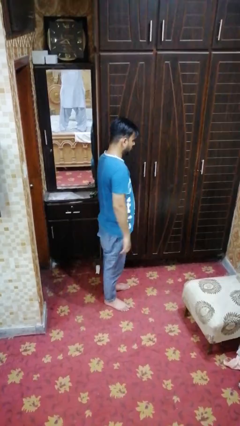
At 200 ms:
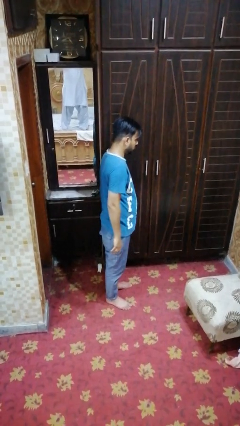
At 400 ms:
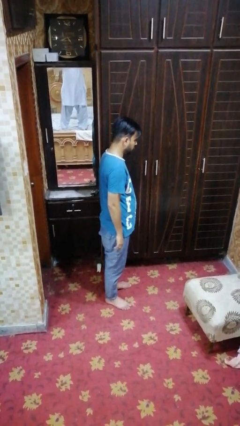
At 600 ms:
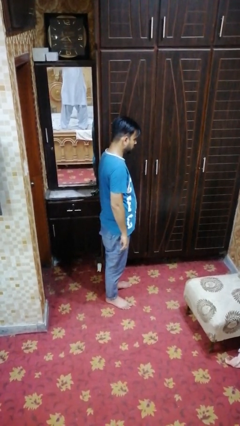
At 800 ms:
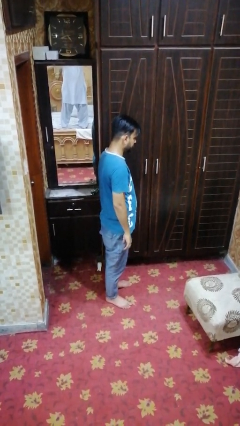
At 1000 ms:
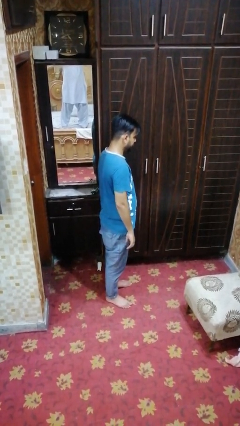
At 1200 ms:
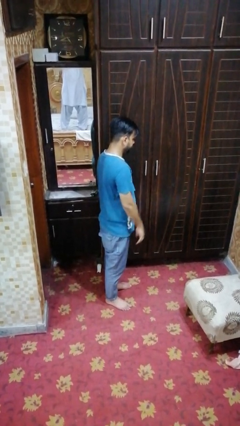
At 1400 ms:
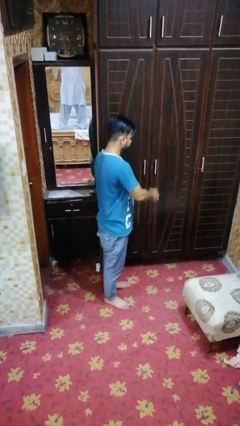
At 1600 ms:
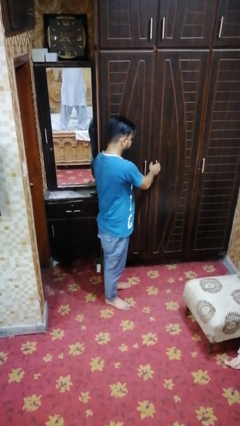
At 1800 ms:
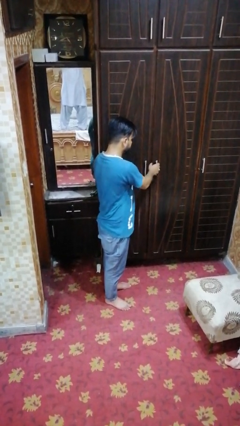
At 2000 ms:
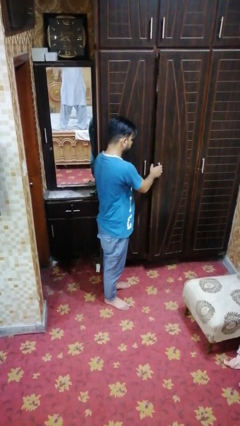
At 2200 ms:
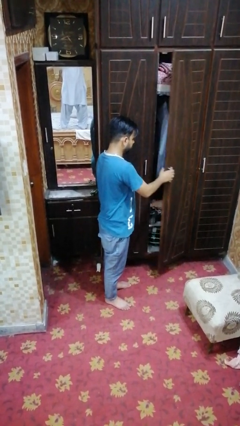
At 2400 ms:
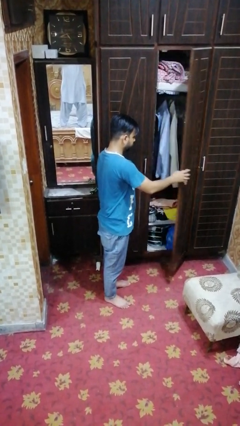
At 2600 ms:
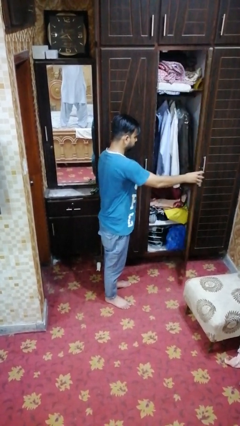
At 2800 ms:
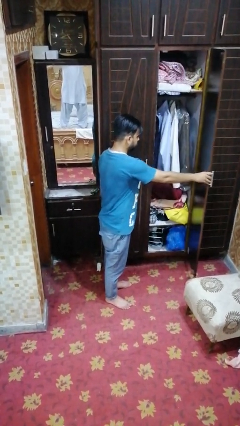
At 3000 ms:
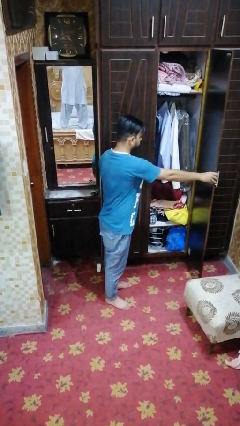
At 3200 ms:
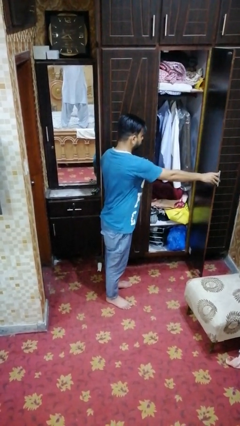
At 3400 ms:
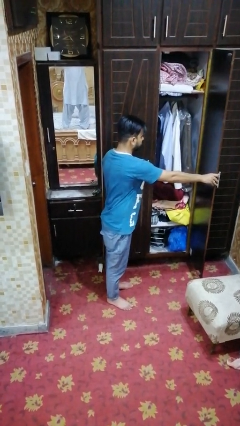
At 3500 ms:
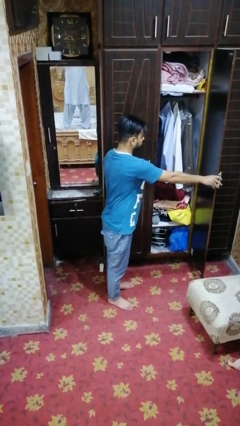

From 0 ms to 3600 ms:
person opens closet door

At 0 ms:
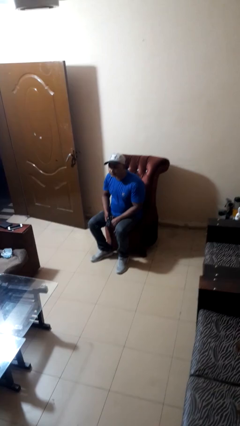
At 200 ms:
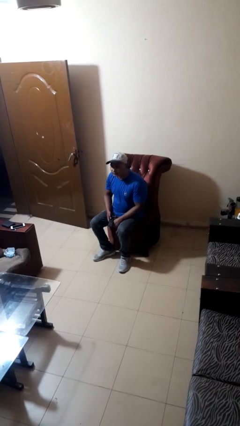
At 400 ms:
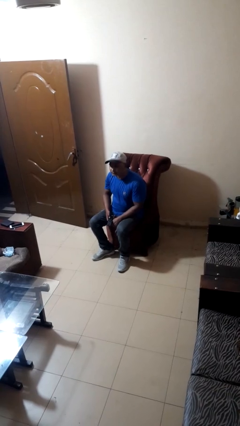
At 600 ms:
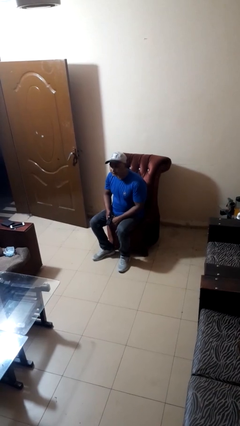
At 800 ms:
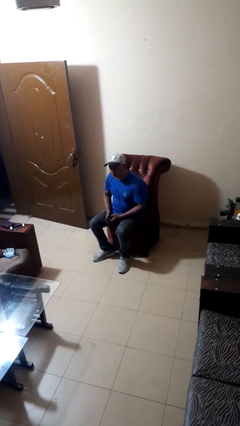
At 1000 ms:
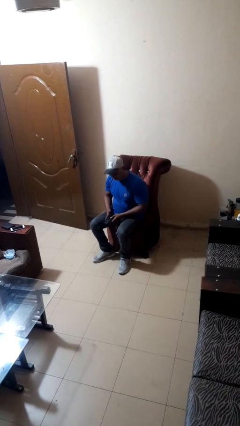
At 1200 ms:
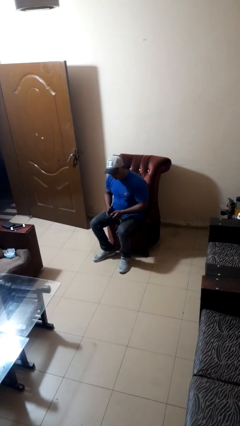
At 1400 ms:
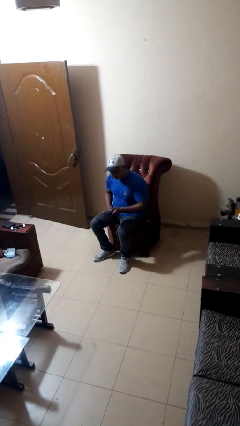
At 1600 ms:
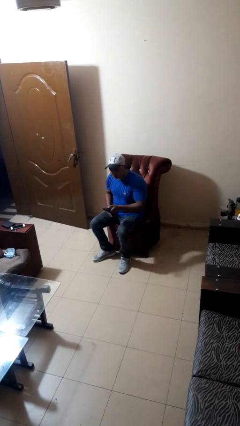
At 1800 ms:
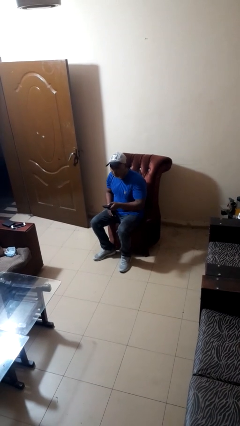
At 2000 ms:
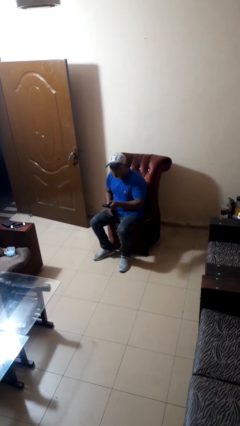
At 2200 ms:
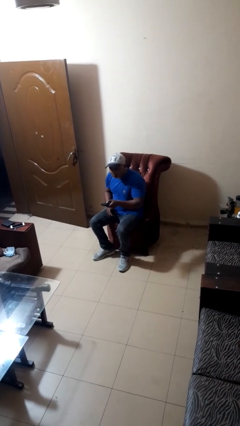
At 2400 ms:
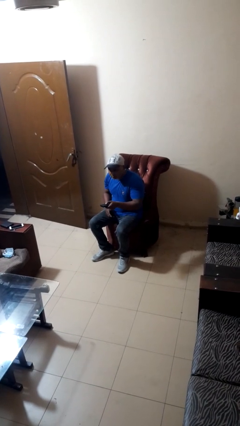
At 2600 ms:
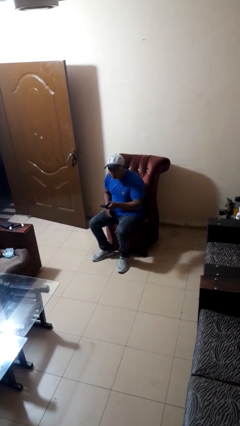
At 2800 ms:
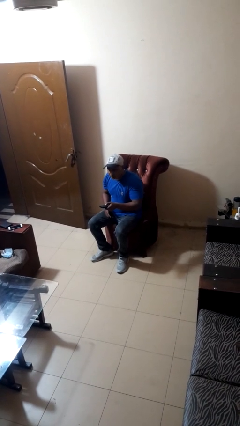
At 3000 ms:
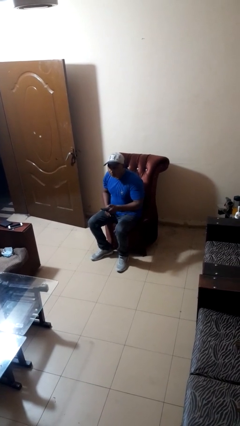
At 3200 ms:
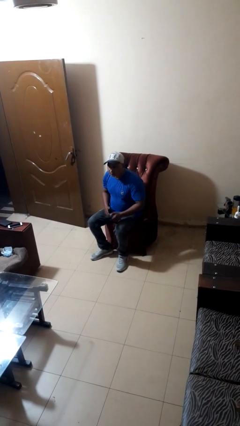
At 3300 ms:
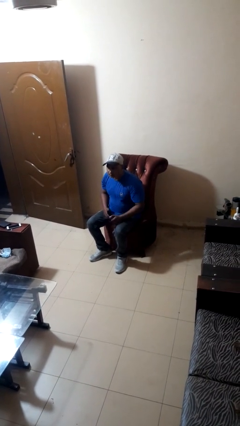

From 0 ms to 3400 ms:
person uses television remote

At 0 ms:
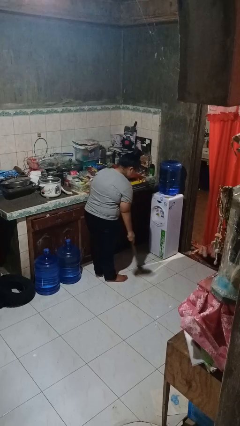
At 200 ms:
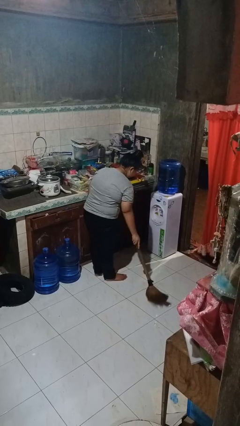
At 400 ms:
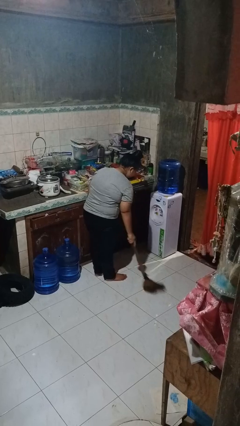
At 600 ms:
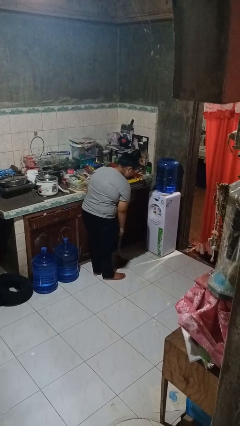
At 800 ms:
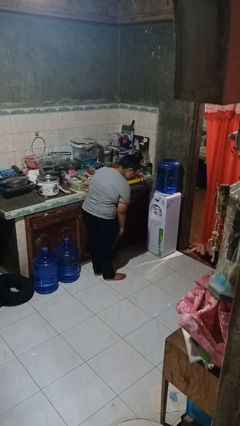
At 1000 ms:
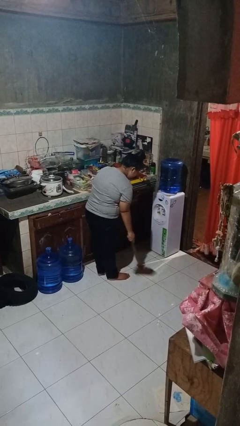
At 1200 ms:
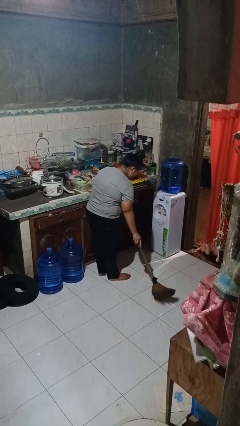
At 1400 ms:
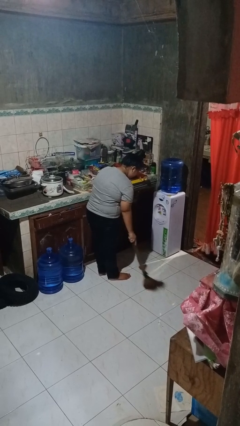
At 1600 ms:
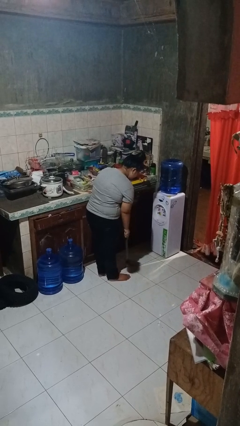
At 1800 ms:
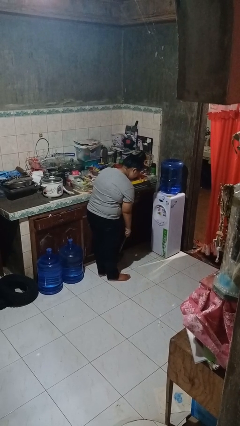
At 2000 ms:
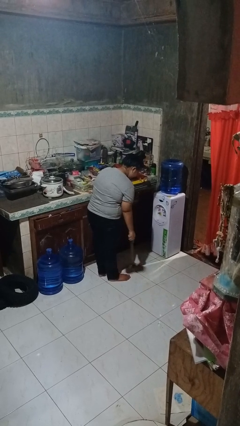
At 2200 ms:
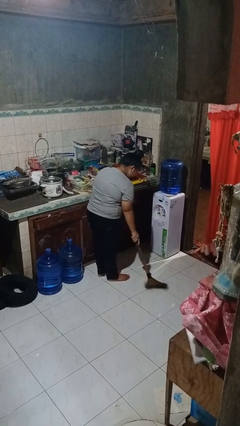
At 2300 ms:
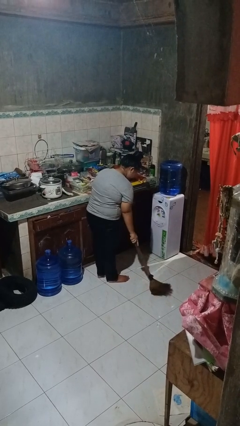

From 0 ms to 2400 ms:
person sweeps floor

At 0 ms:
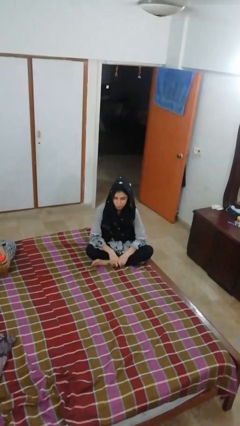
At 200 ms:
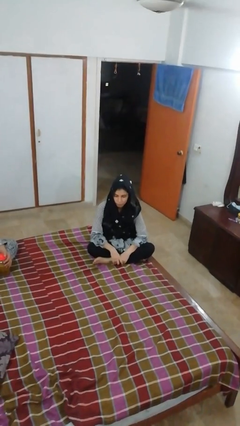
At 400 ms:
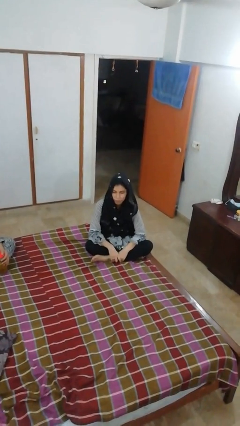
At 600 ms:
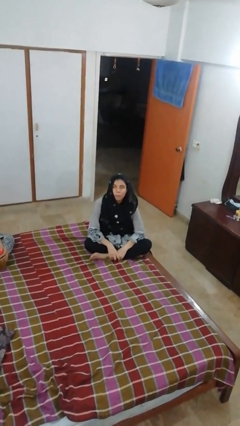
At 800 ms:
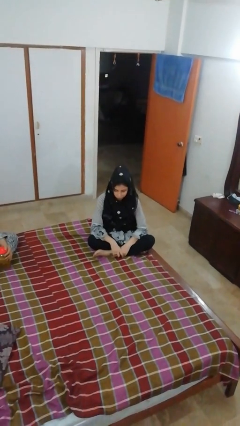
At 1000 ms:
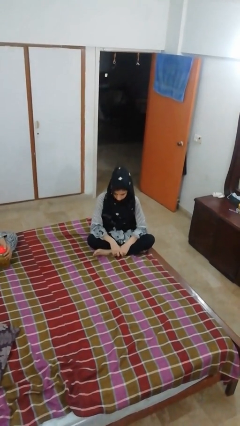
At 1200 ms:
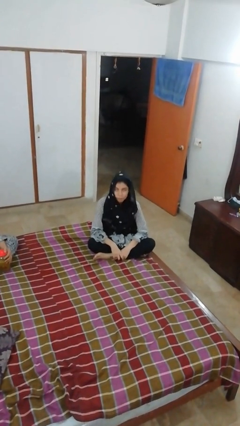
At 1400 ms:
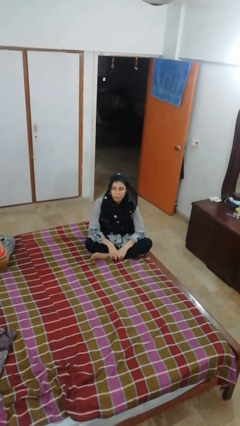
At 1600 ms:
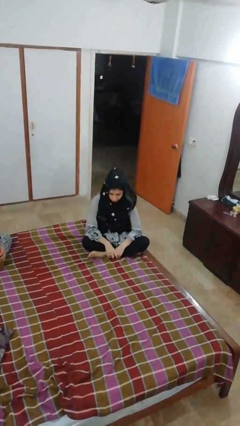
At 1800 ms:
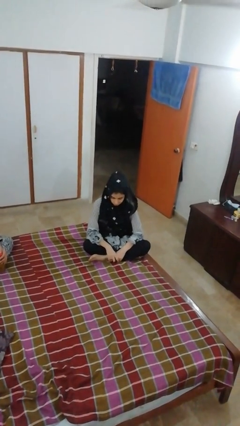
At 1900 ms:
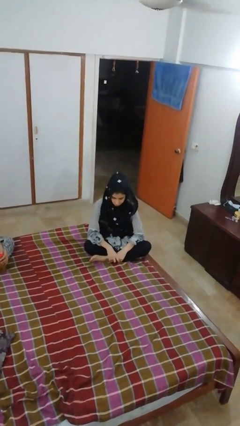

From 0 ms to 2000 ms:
person nods head

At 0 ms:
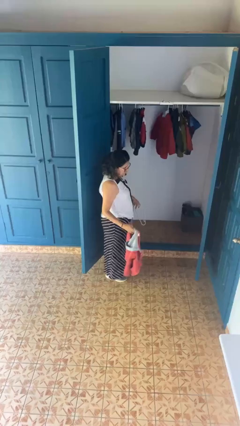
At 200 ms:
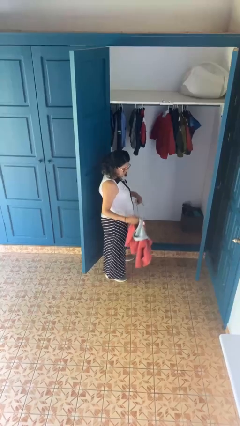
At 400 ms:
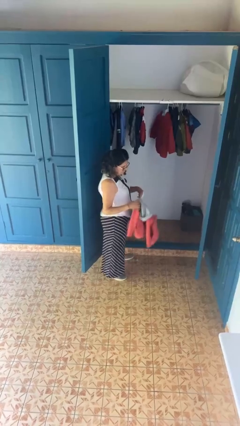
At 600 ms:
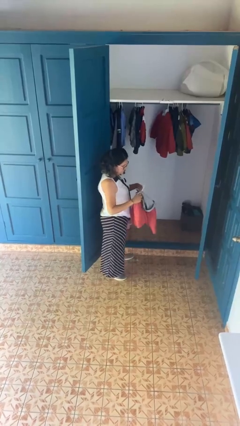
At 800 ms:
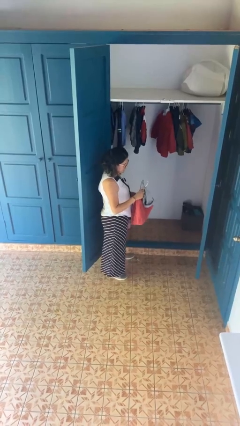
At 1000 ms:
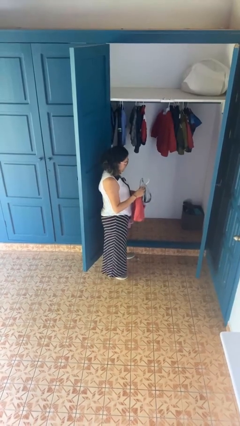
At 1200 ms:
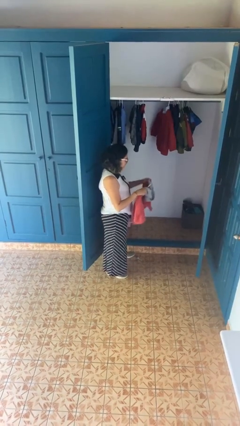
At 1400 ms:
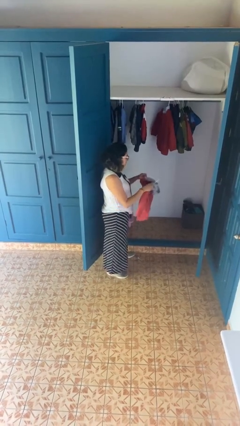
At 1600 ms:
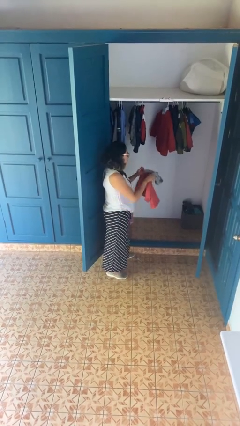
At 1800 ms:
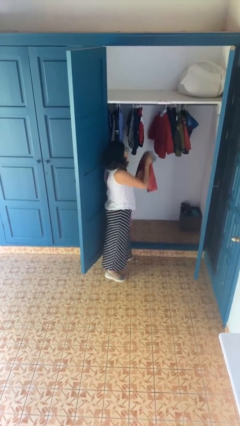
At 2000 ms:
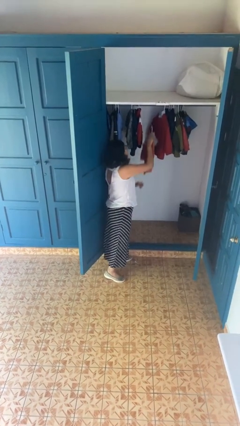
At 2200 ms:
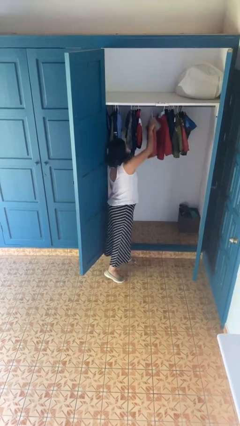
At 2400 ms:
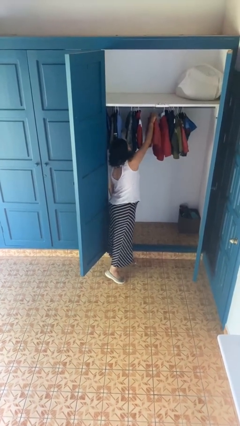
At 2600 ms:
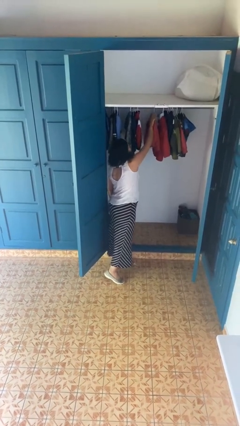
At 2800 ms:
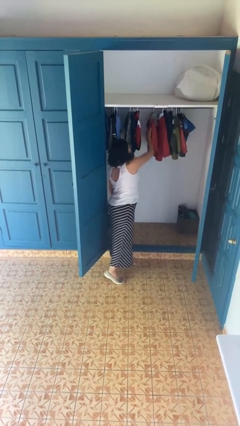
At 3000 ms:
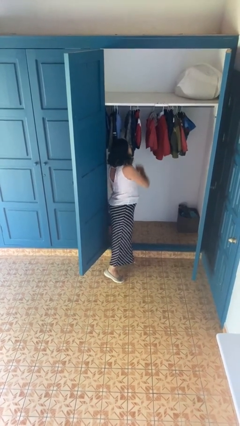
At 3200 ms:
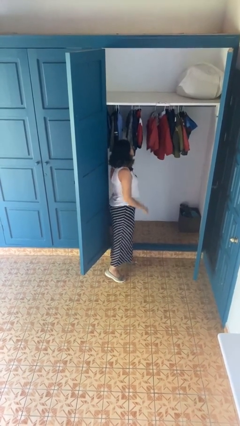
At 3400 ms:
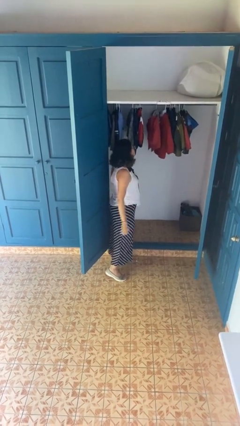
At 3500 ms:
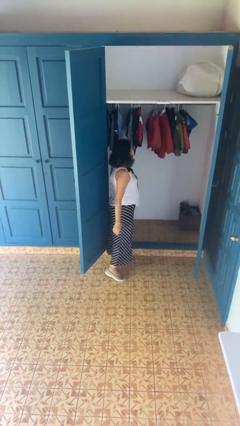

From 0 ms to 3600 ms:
person puts clothes into closet

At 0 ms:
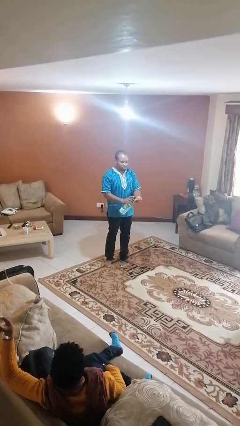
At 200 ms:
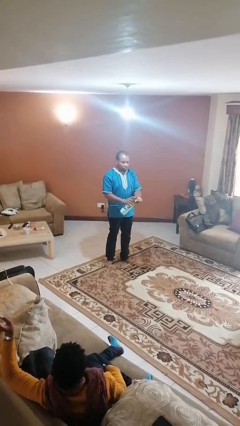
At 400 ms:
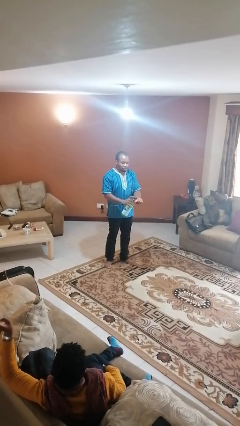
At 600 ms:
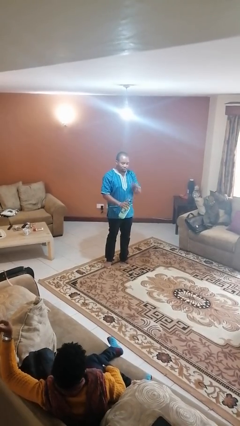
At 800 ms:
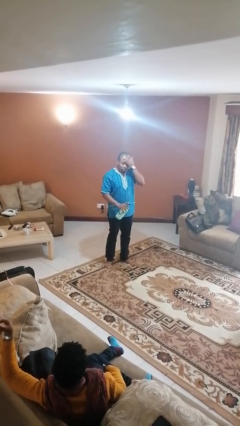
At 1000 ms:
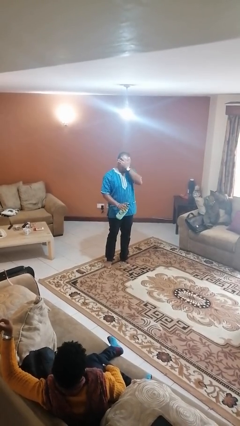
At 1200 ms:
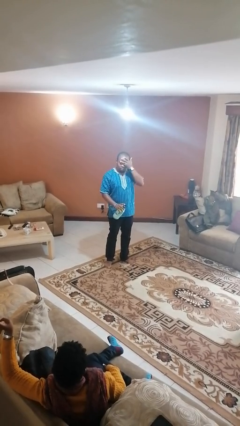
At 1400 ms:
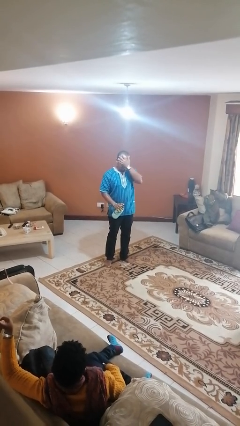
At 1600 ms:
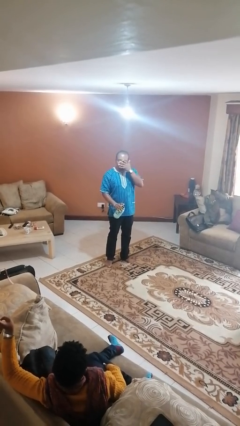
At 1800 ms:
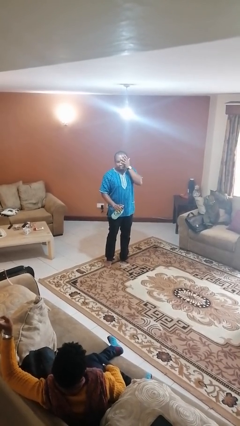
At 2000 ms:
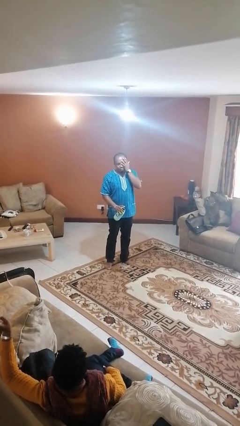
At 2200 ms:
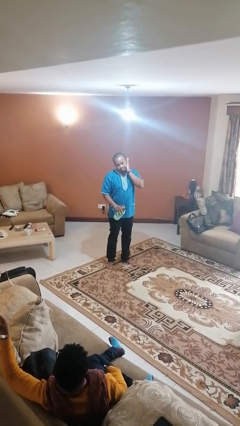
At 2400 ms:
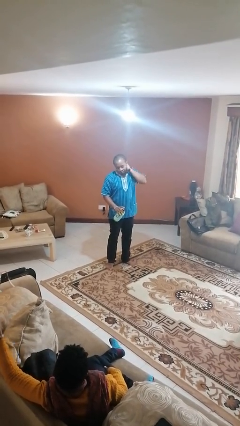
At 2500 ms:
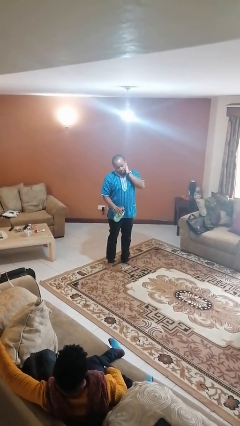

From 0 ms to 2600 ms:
person applies sunscreen
